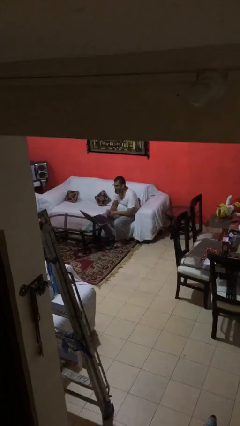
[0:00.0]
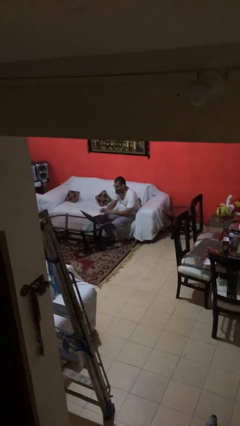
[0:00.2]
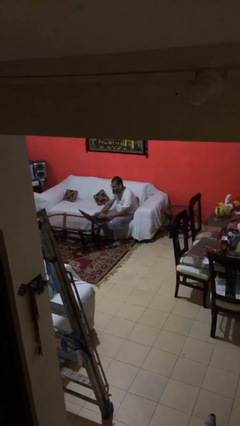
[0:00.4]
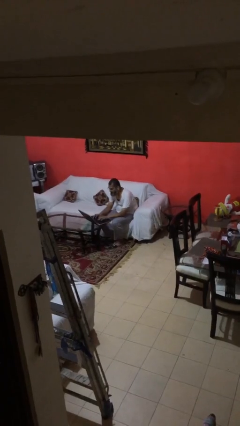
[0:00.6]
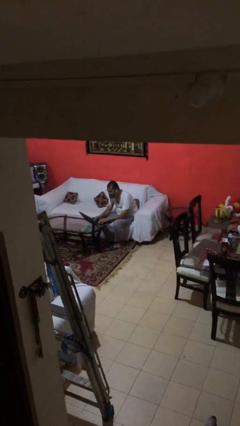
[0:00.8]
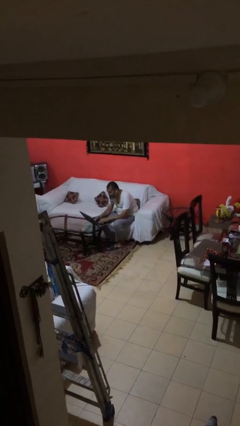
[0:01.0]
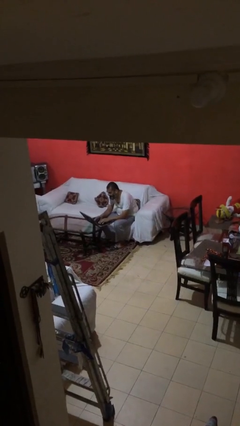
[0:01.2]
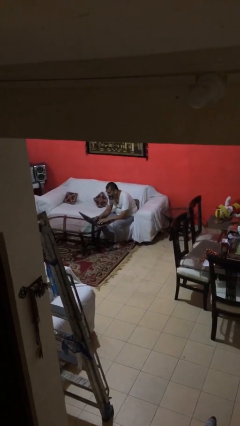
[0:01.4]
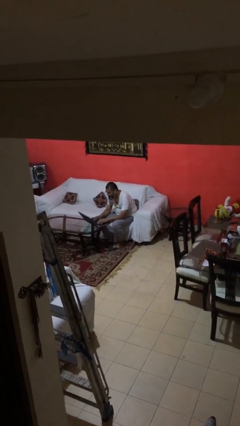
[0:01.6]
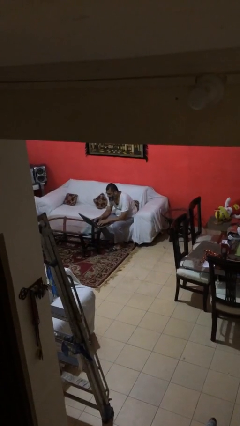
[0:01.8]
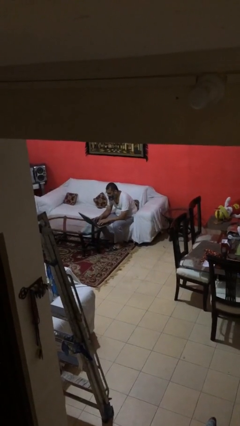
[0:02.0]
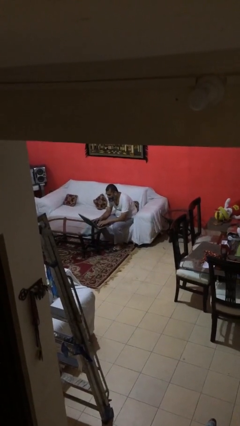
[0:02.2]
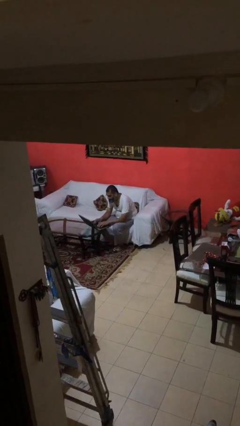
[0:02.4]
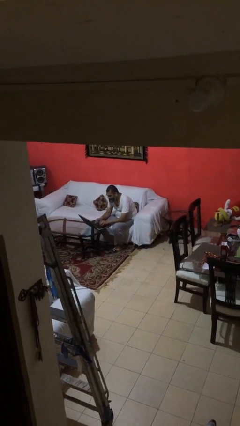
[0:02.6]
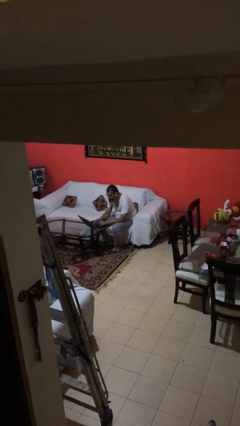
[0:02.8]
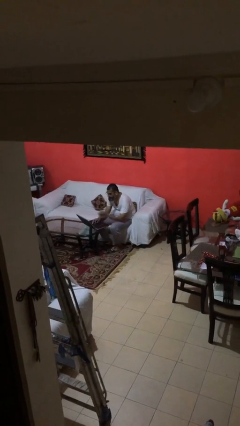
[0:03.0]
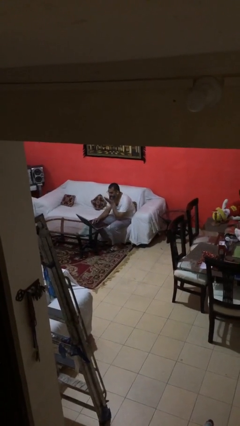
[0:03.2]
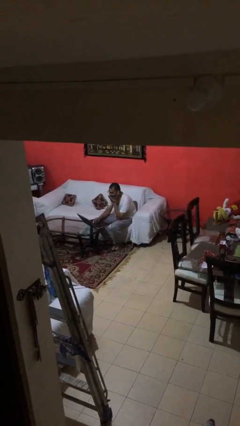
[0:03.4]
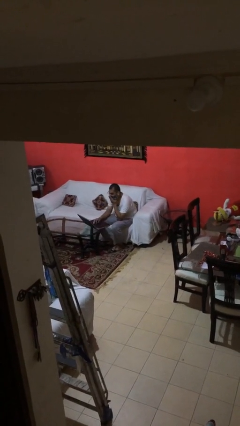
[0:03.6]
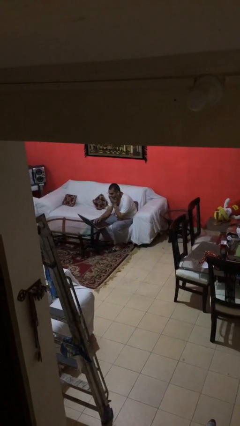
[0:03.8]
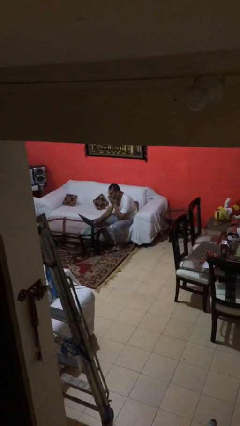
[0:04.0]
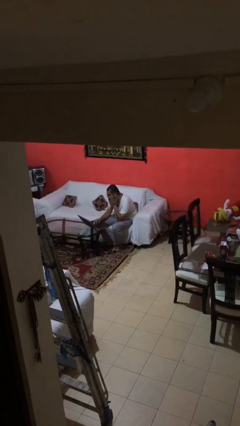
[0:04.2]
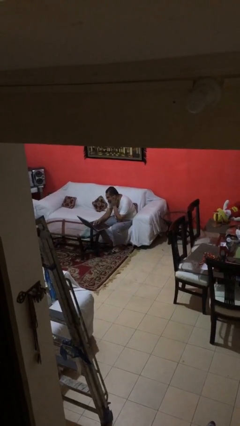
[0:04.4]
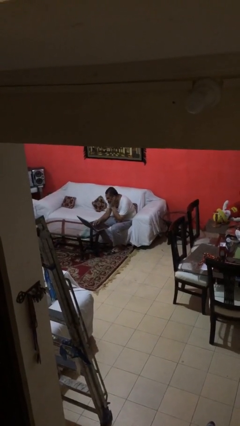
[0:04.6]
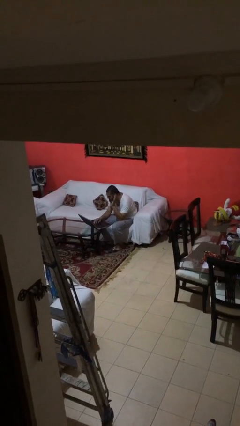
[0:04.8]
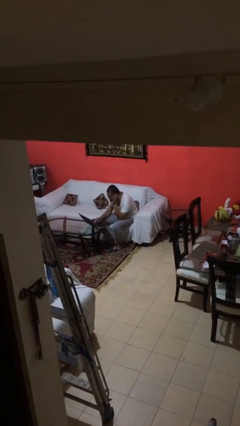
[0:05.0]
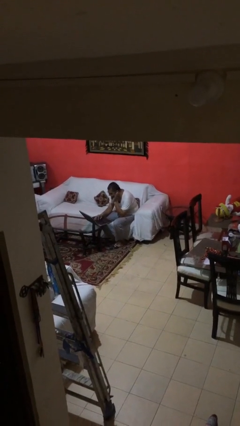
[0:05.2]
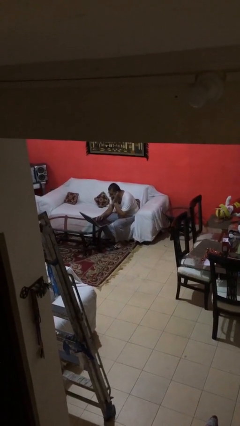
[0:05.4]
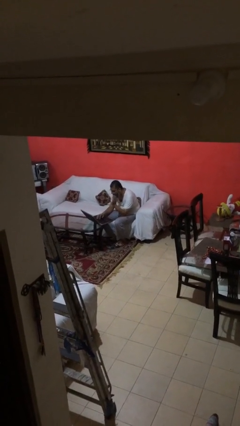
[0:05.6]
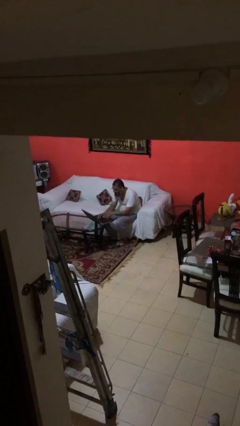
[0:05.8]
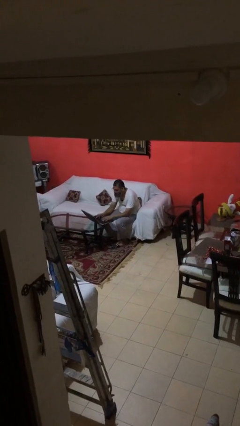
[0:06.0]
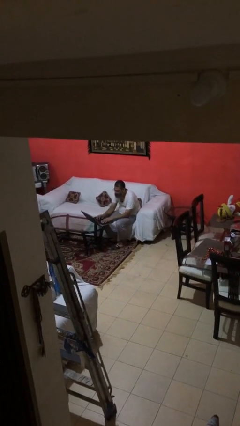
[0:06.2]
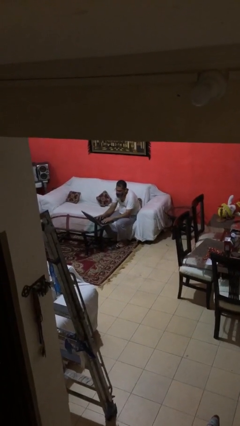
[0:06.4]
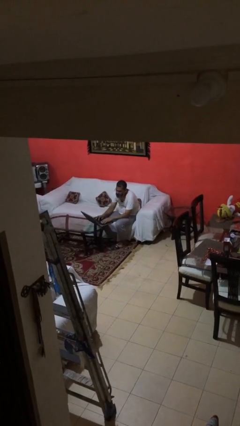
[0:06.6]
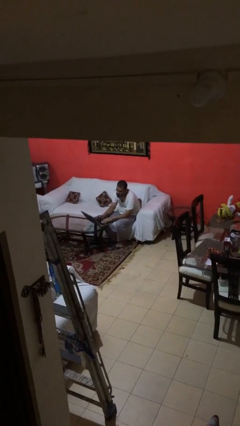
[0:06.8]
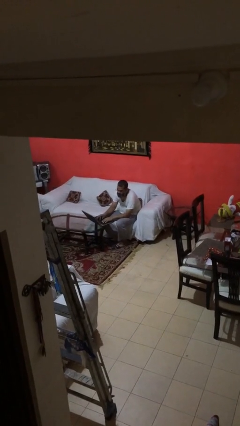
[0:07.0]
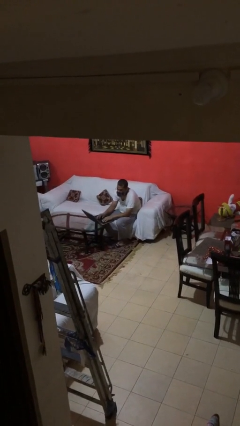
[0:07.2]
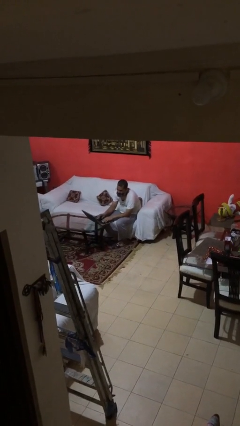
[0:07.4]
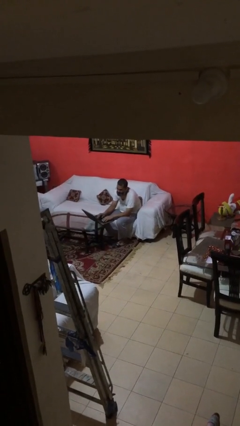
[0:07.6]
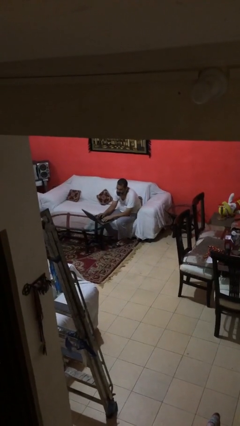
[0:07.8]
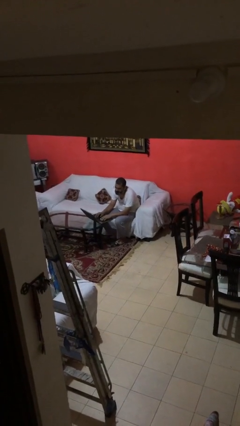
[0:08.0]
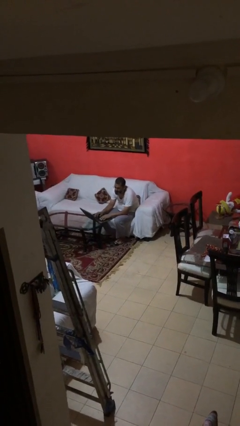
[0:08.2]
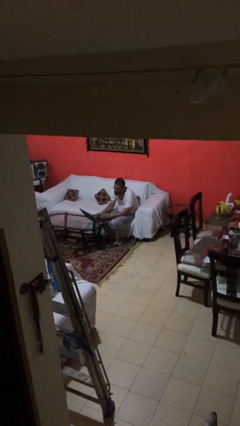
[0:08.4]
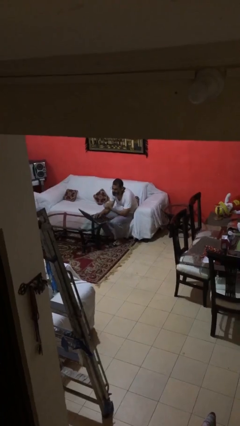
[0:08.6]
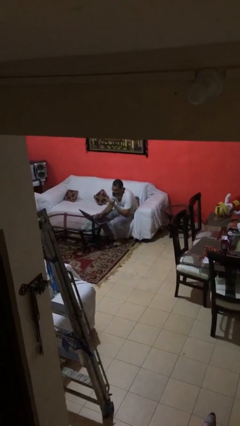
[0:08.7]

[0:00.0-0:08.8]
person interacts with laptop

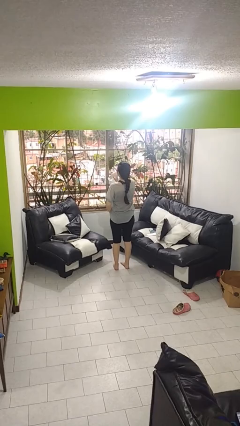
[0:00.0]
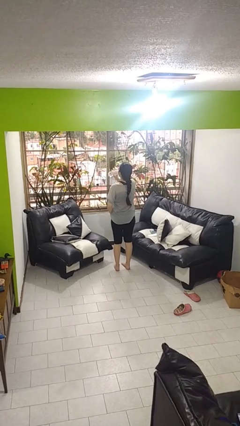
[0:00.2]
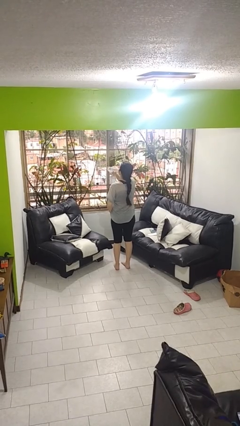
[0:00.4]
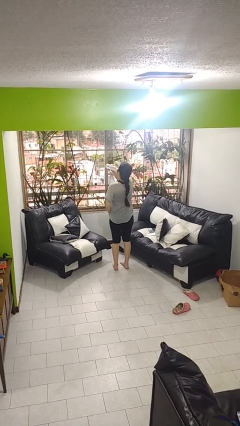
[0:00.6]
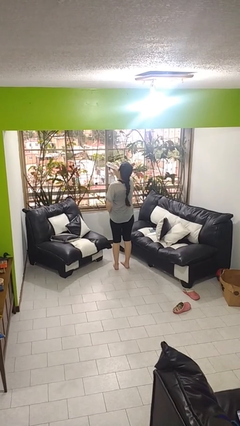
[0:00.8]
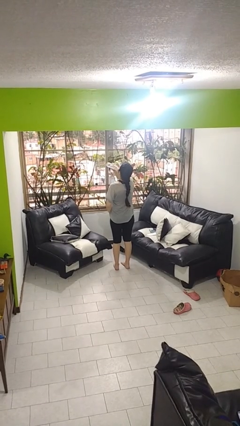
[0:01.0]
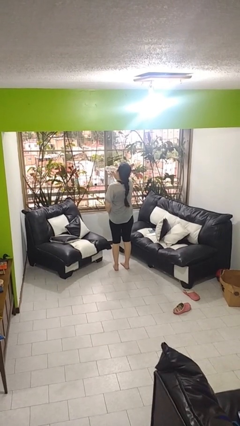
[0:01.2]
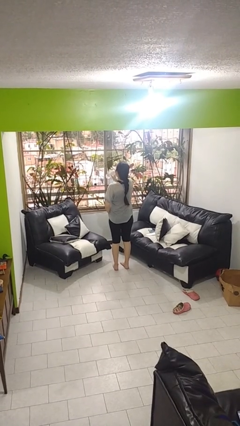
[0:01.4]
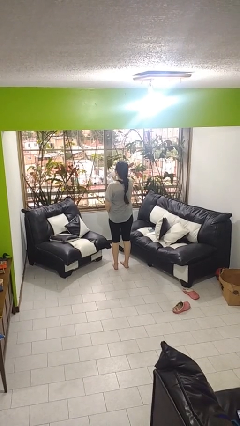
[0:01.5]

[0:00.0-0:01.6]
person drinks from bottle

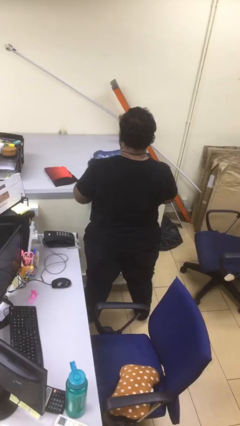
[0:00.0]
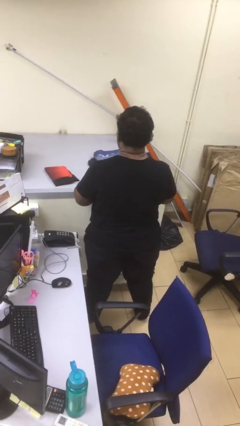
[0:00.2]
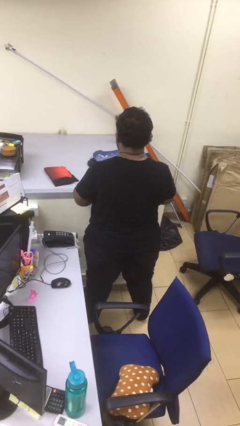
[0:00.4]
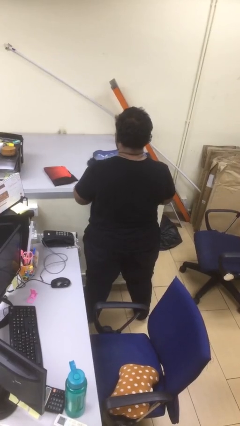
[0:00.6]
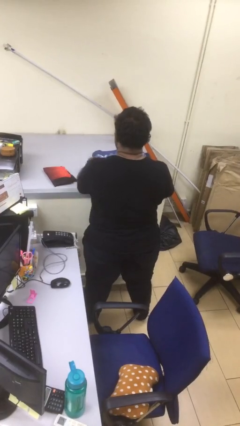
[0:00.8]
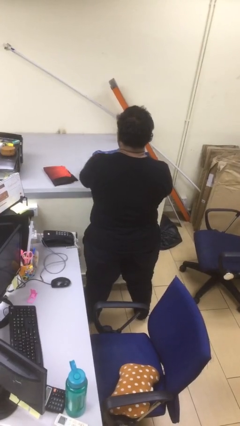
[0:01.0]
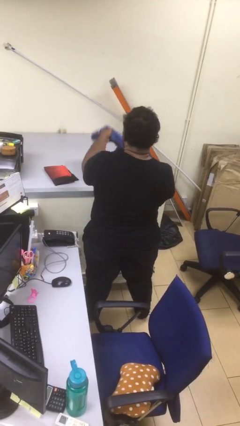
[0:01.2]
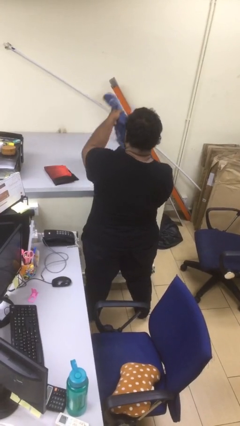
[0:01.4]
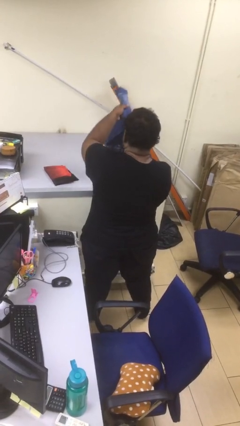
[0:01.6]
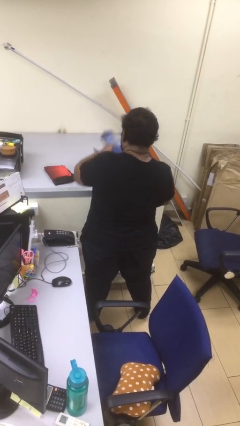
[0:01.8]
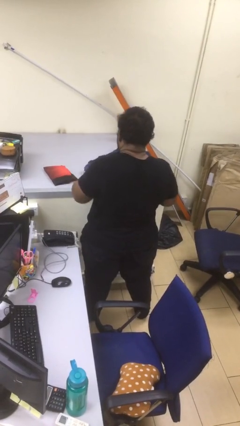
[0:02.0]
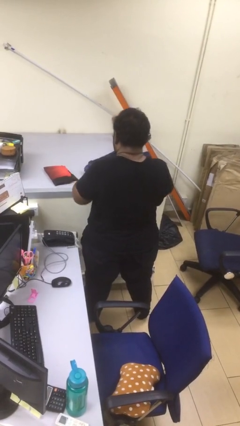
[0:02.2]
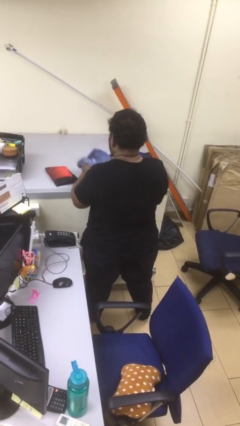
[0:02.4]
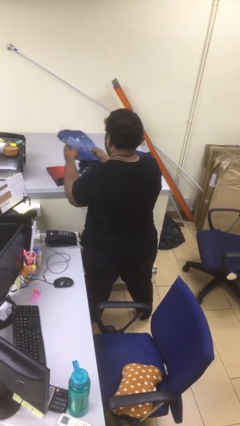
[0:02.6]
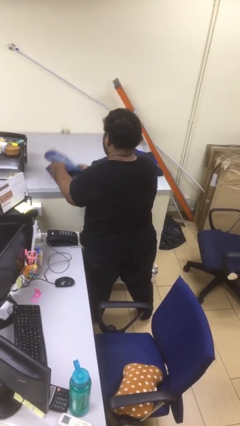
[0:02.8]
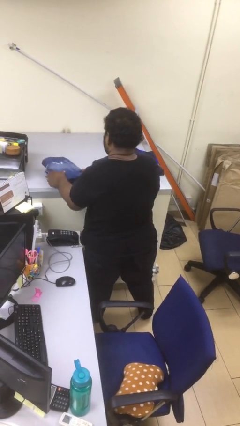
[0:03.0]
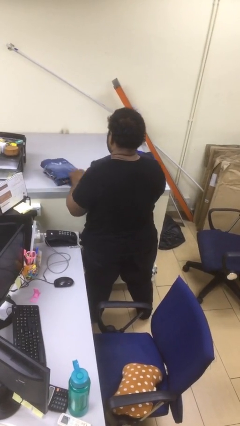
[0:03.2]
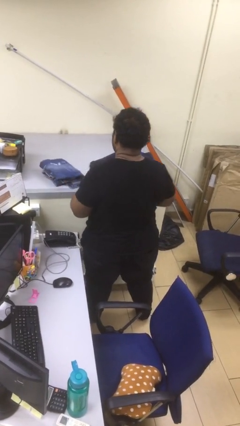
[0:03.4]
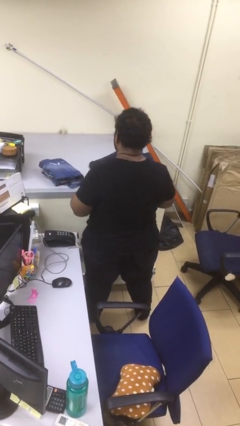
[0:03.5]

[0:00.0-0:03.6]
person folds pants

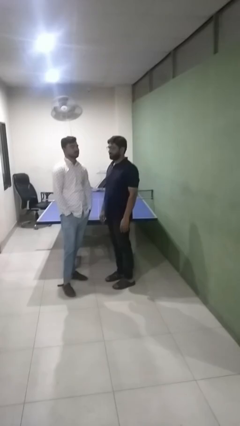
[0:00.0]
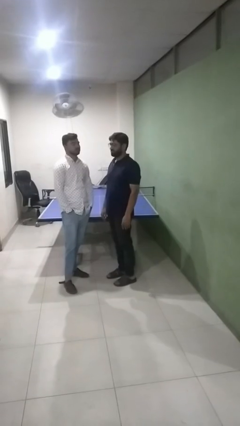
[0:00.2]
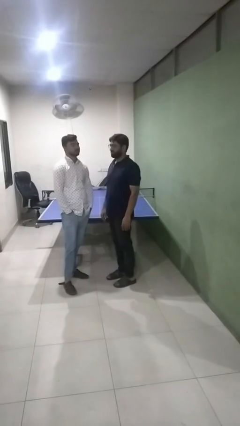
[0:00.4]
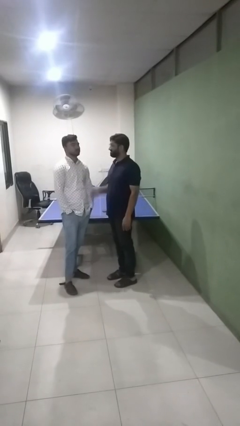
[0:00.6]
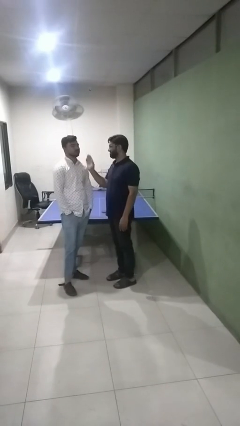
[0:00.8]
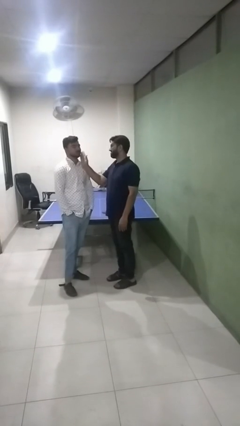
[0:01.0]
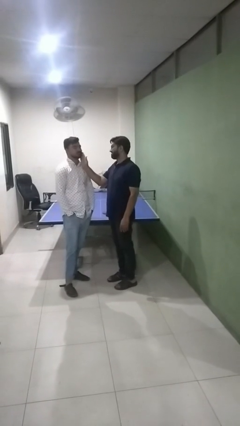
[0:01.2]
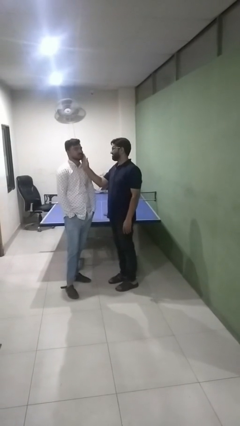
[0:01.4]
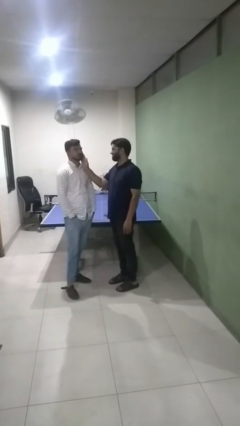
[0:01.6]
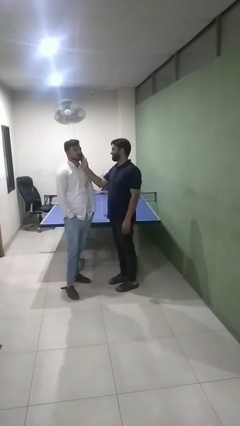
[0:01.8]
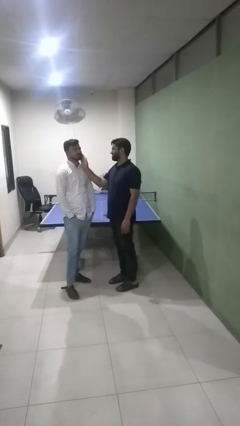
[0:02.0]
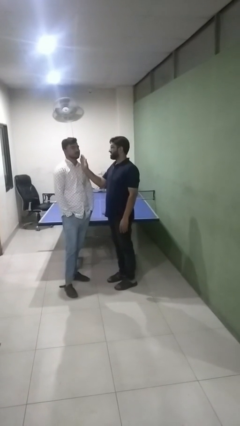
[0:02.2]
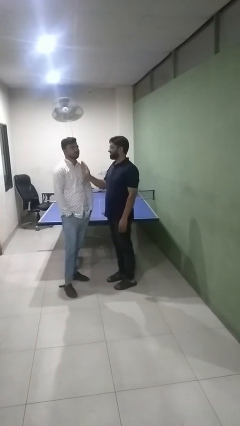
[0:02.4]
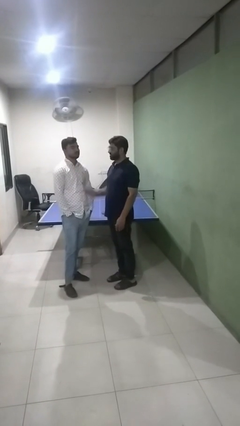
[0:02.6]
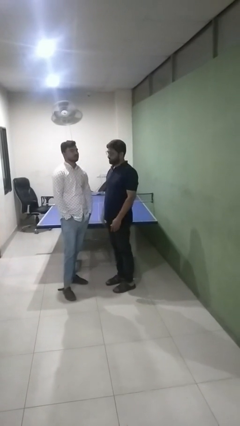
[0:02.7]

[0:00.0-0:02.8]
person touches face of person

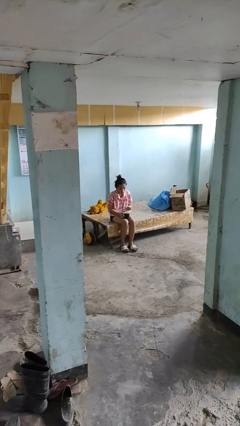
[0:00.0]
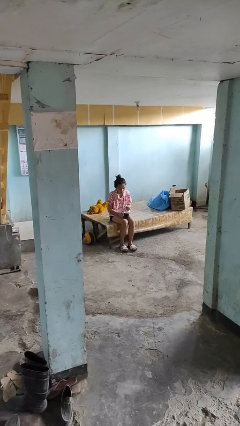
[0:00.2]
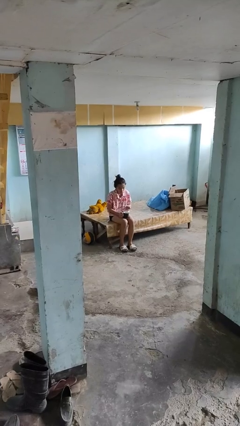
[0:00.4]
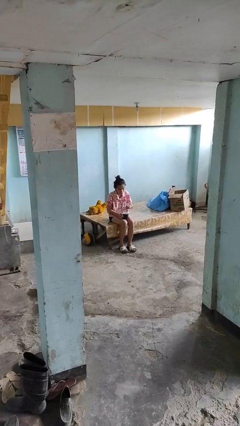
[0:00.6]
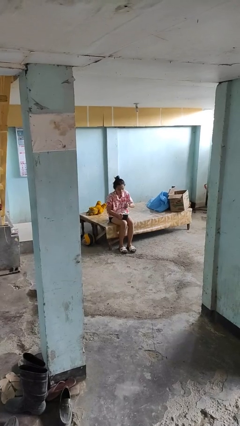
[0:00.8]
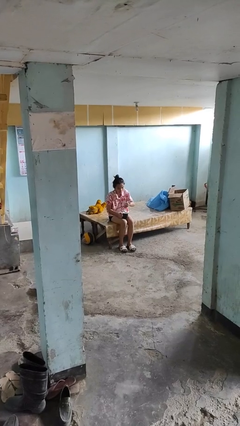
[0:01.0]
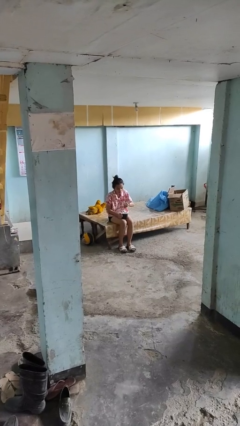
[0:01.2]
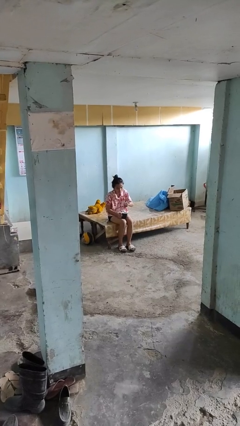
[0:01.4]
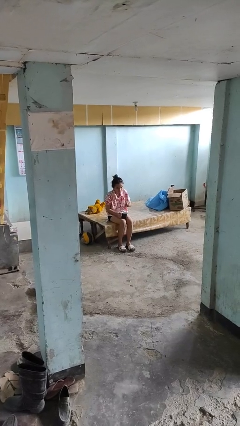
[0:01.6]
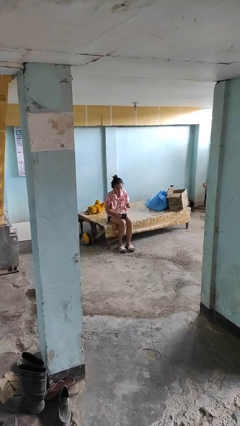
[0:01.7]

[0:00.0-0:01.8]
person stirs mug
